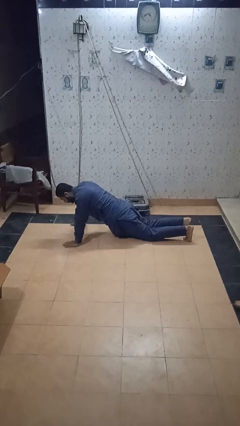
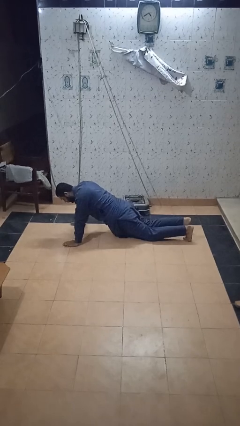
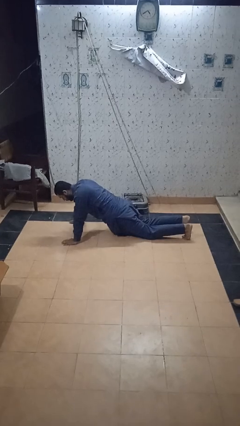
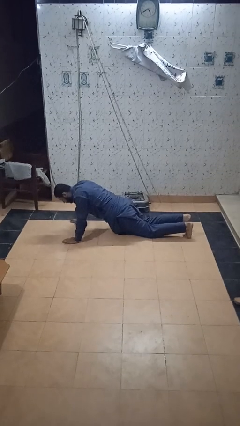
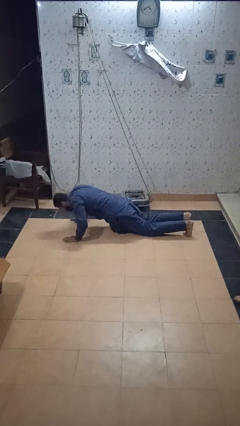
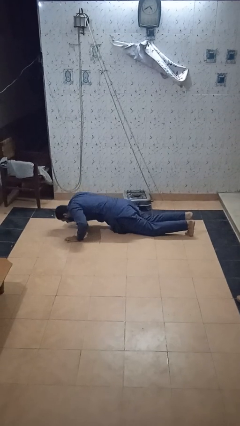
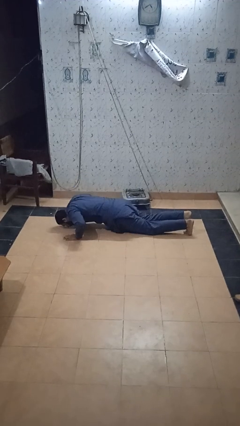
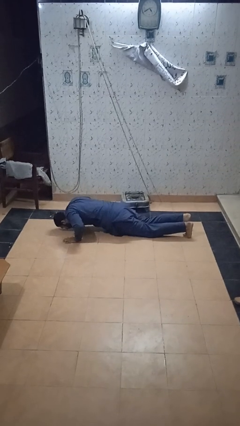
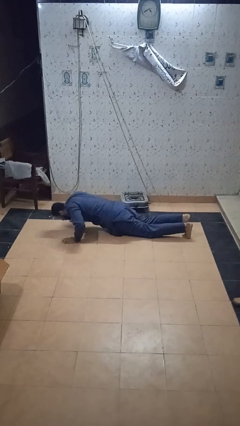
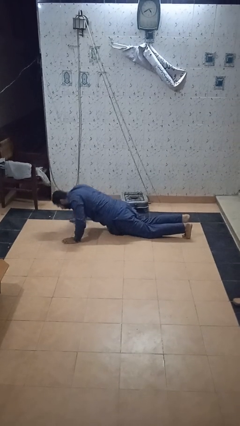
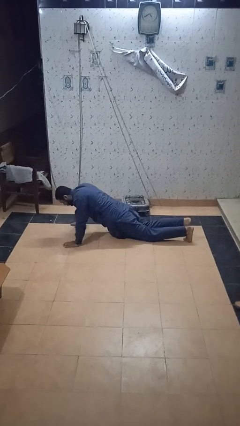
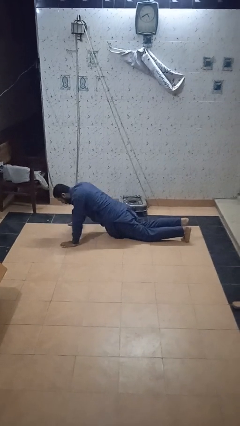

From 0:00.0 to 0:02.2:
person exercises with pushup

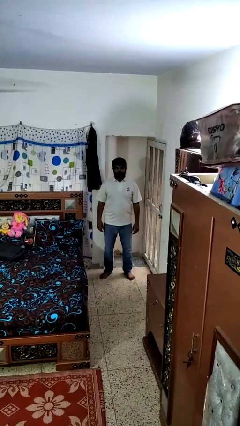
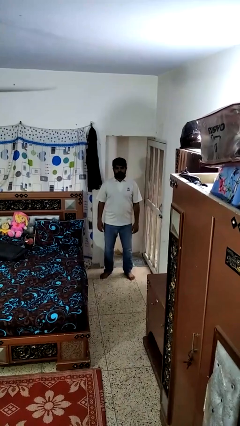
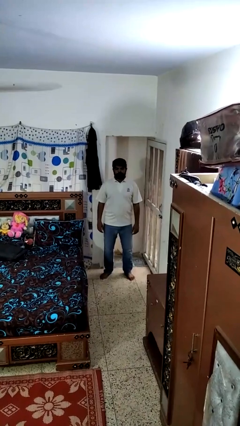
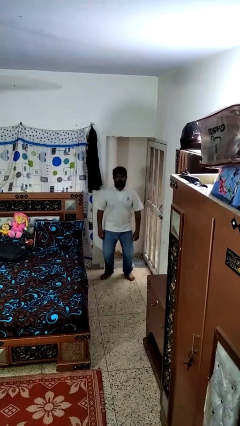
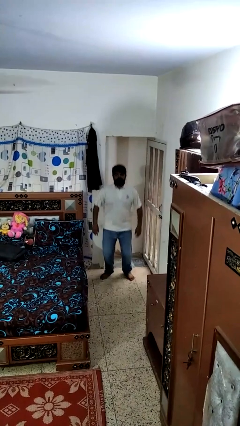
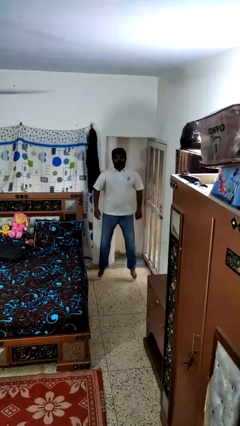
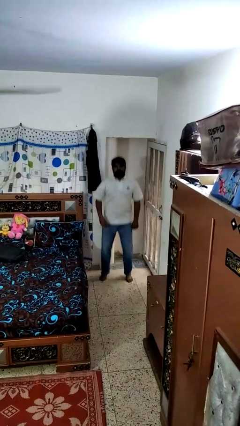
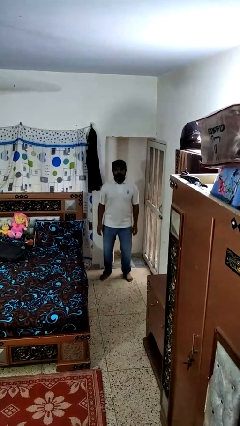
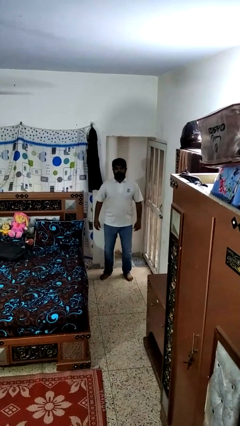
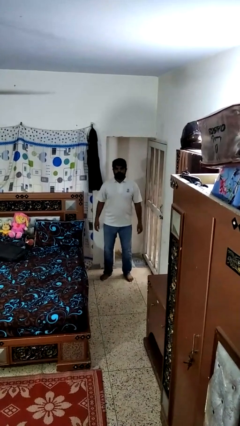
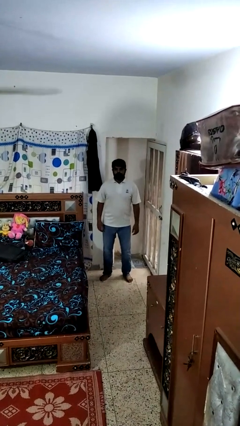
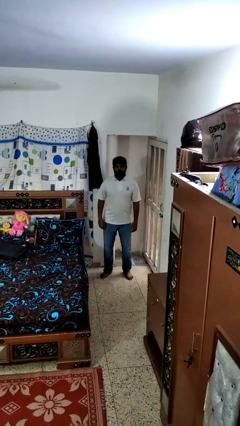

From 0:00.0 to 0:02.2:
person jumps

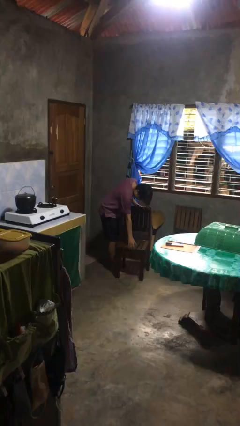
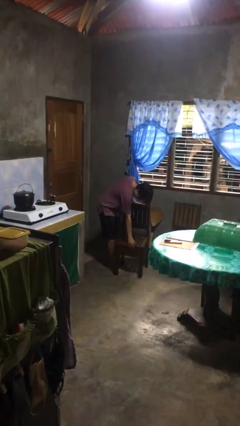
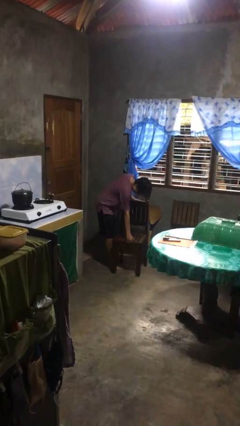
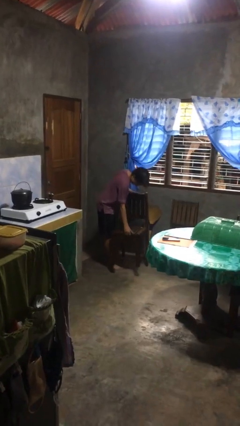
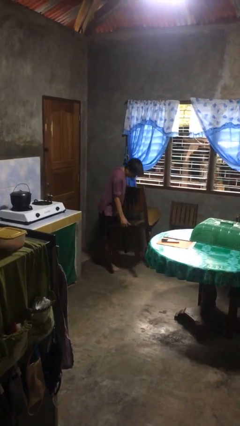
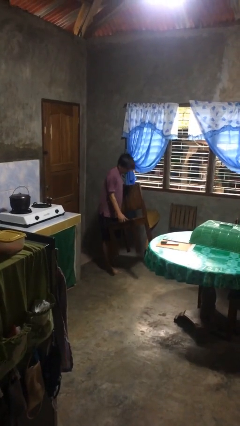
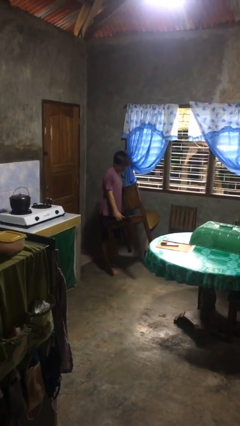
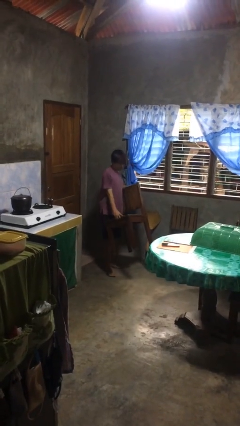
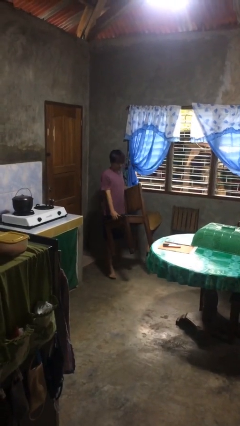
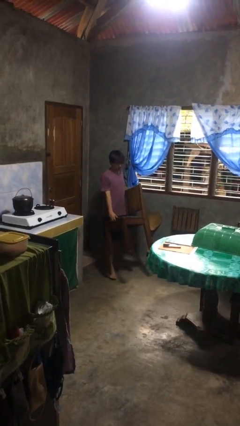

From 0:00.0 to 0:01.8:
person picks up object from floor

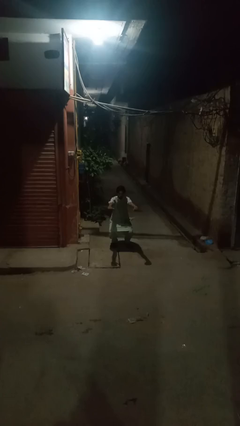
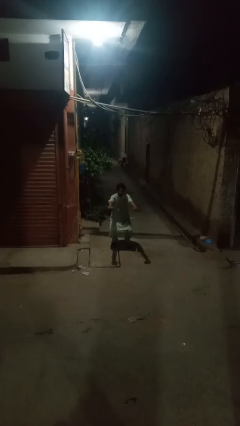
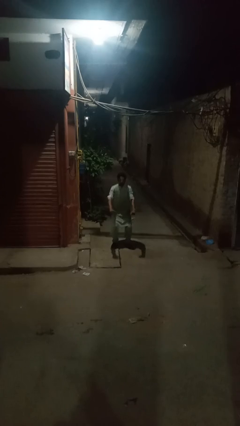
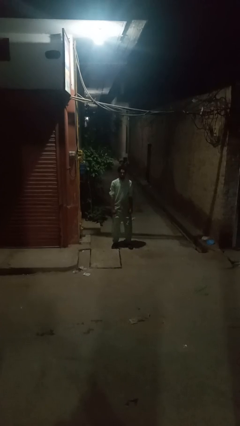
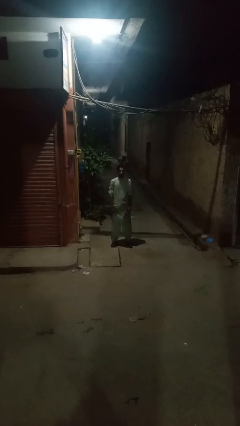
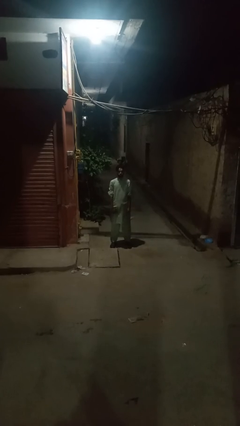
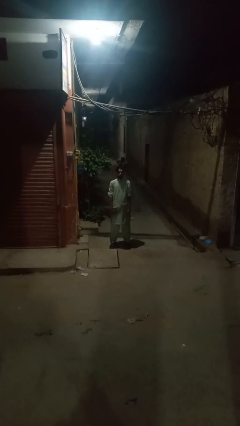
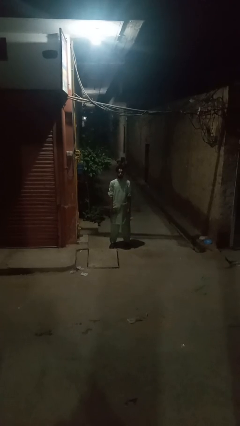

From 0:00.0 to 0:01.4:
person stands up

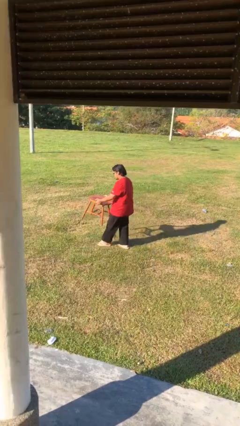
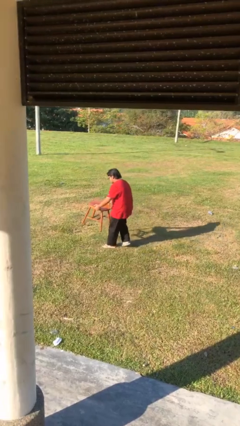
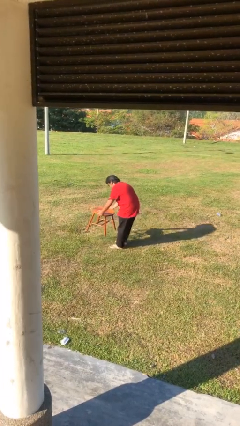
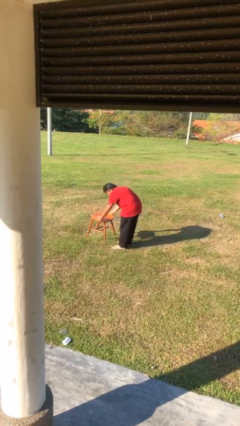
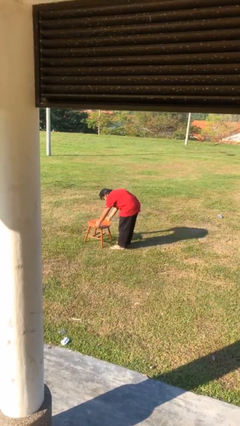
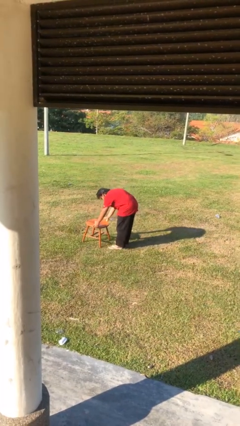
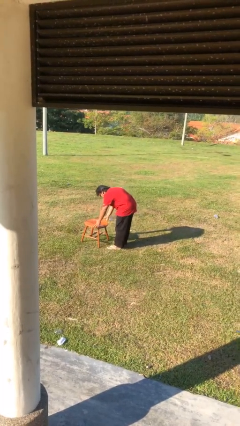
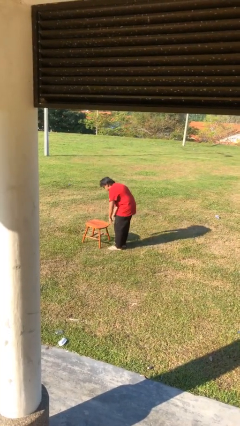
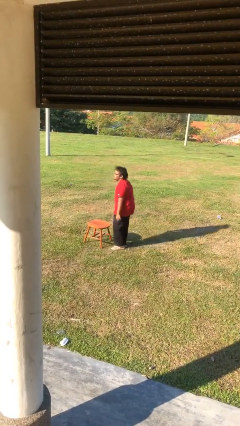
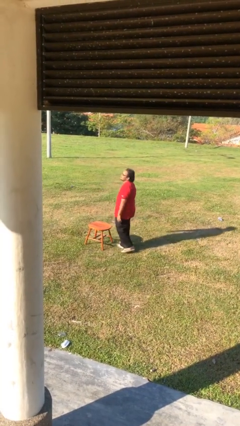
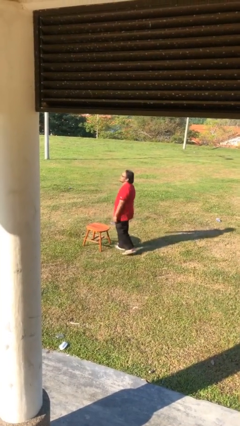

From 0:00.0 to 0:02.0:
person puts down object on floor

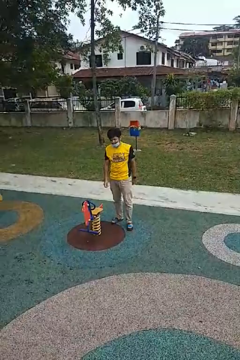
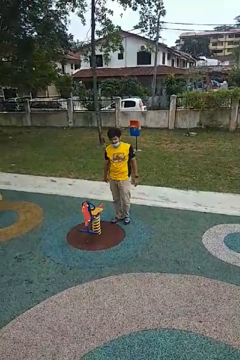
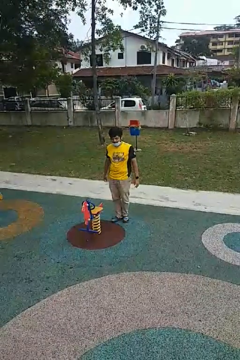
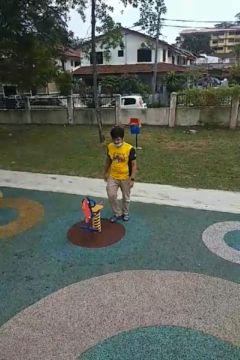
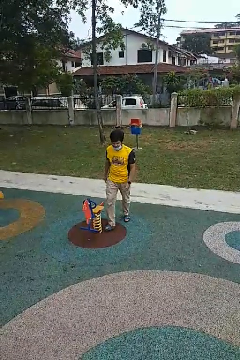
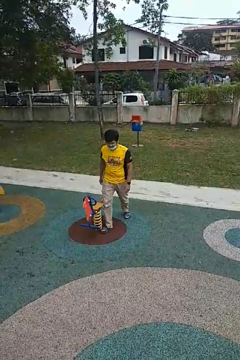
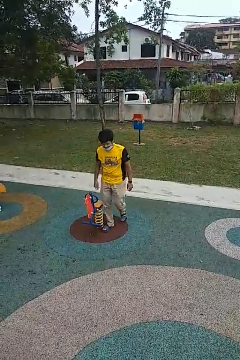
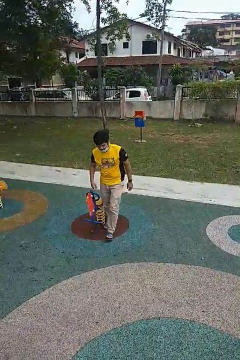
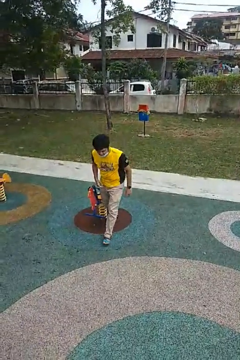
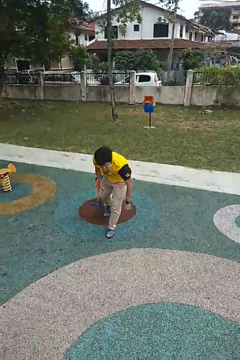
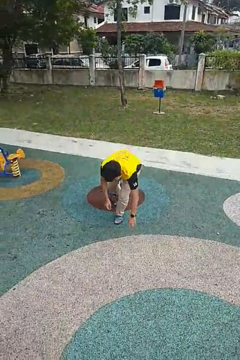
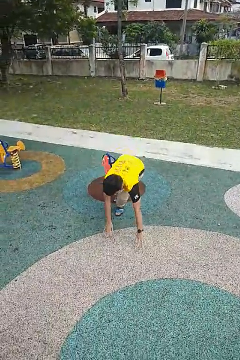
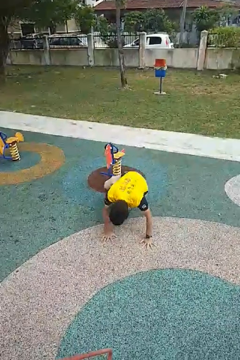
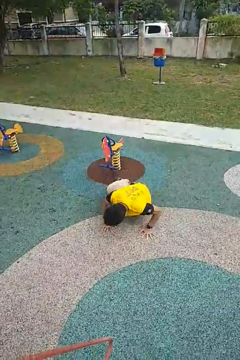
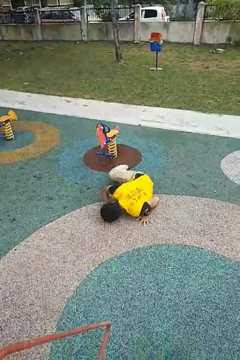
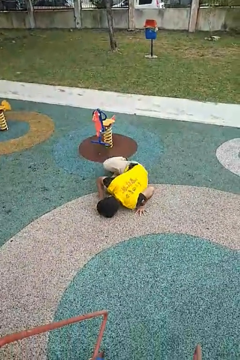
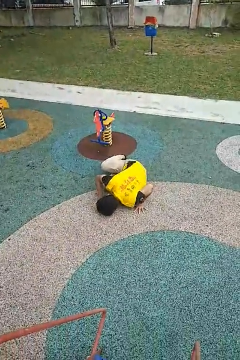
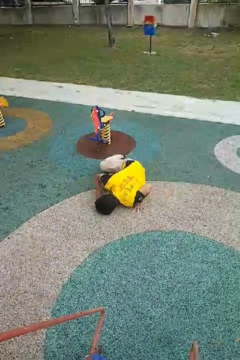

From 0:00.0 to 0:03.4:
person trips on object on floor

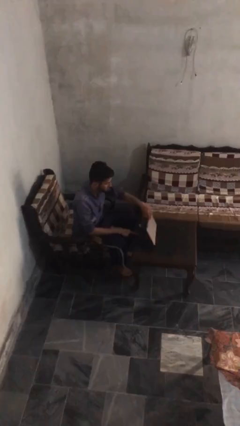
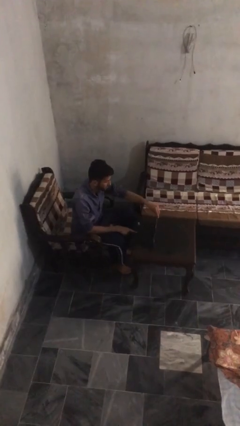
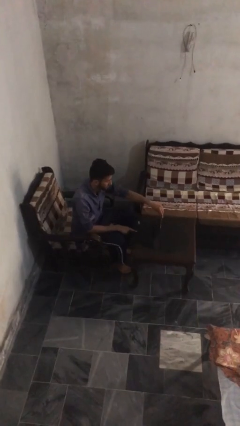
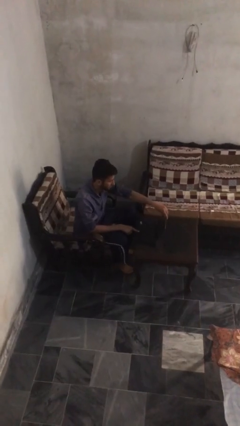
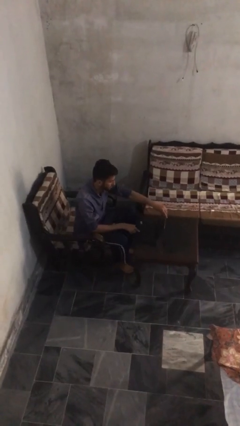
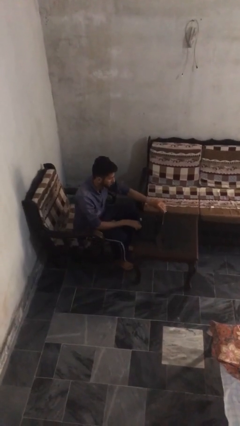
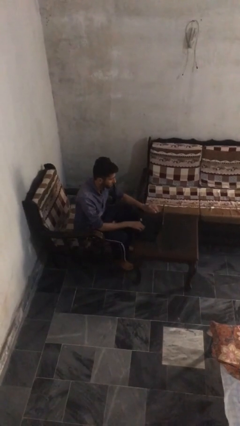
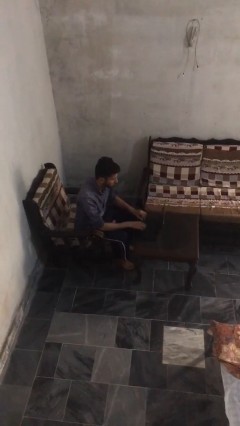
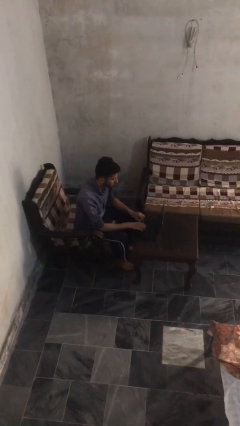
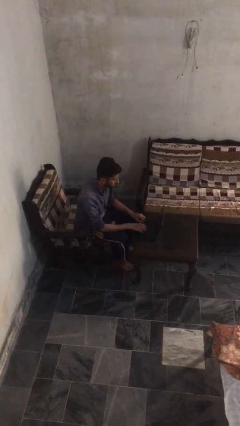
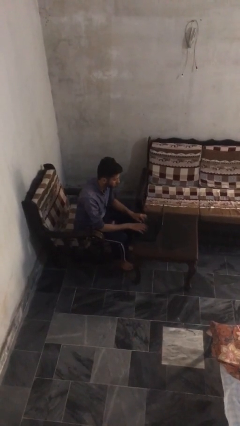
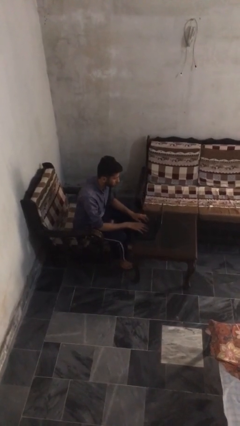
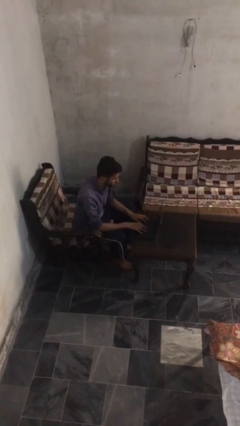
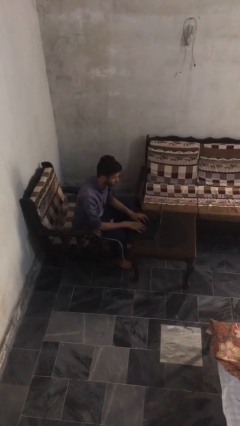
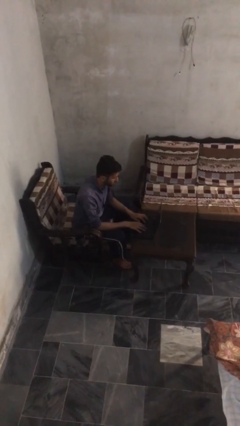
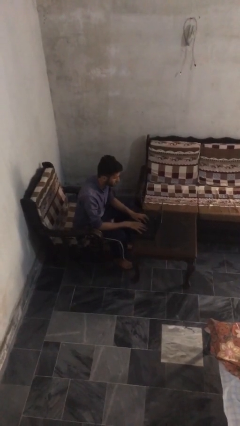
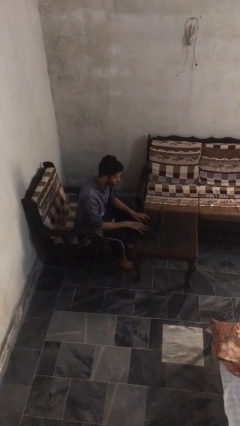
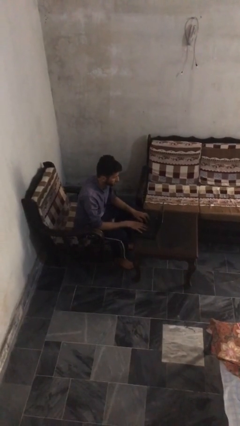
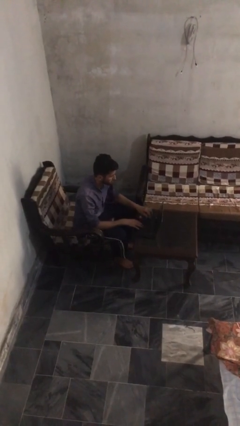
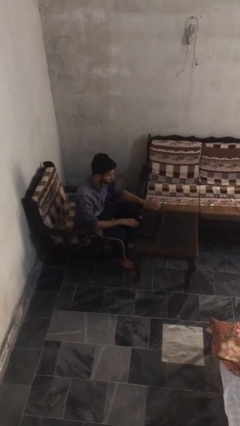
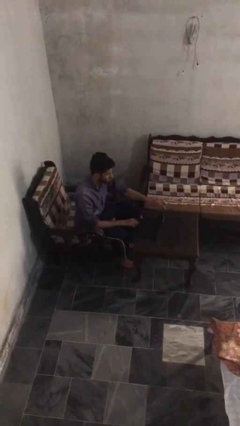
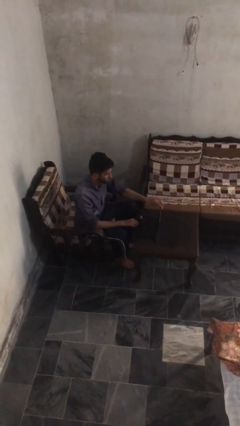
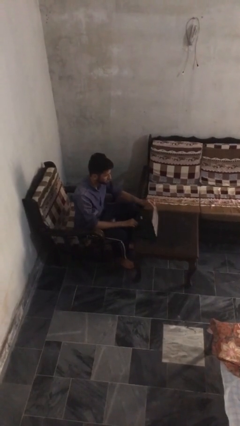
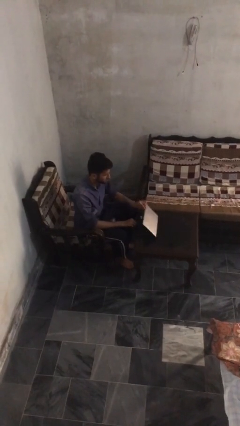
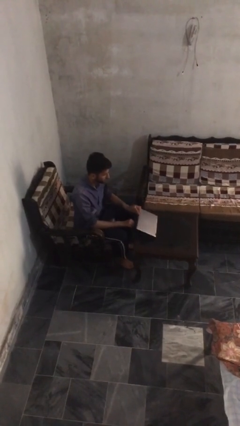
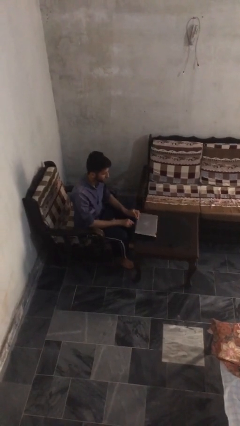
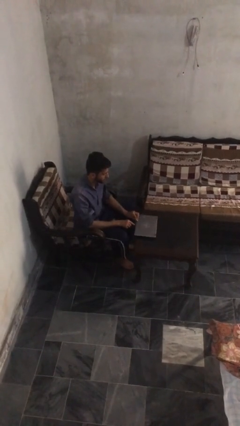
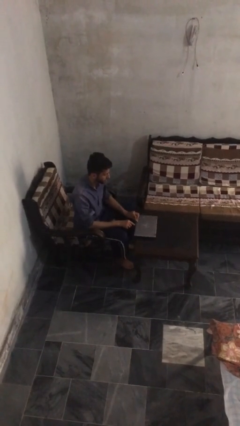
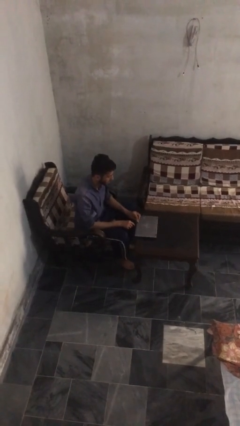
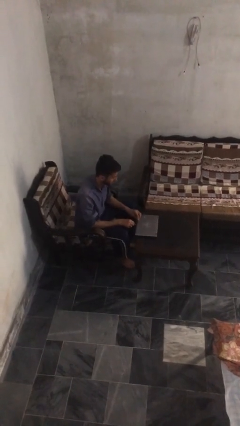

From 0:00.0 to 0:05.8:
person interacts with laptop
